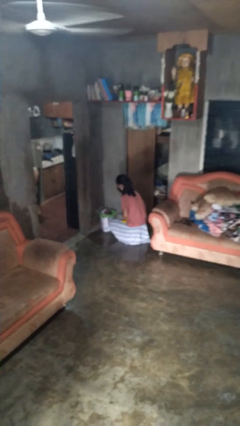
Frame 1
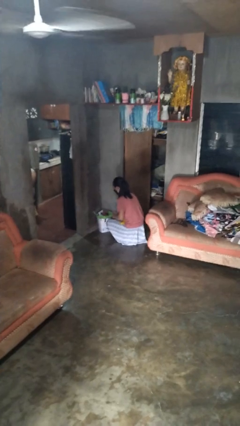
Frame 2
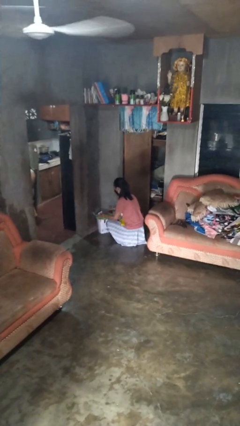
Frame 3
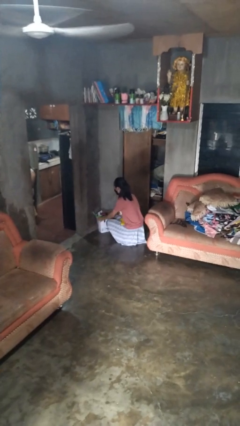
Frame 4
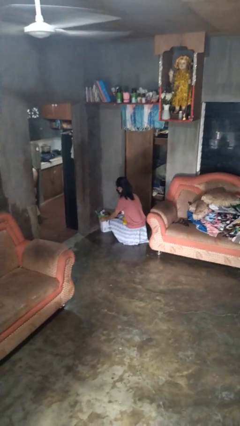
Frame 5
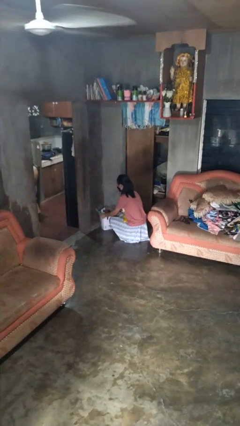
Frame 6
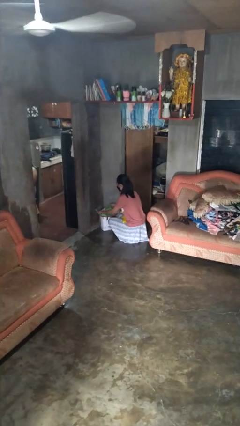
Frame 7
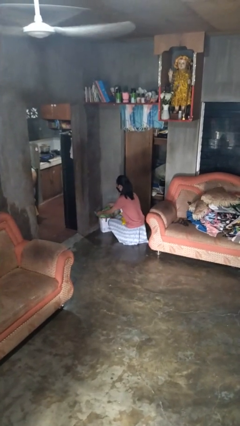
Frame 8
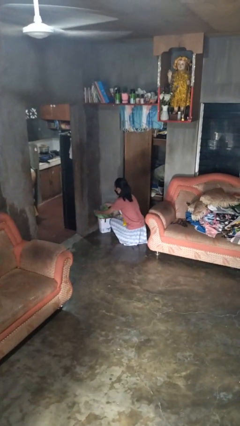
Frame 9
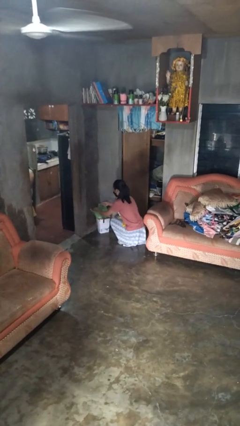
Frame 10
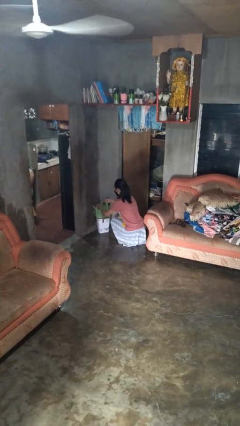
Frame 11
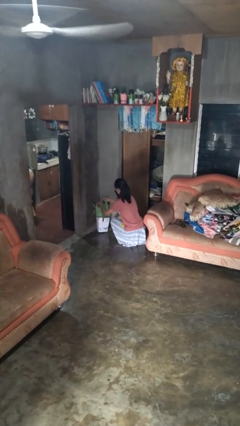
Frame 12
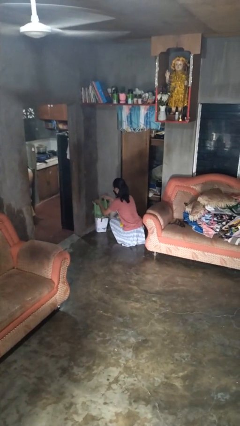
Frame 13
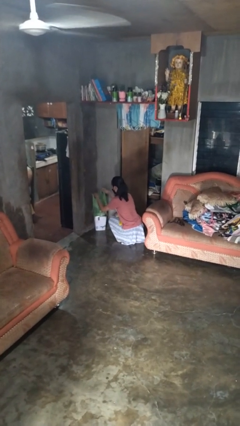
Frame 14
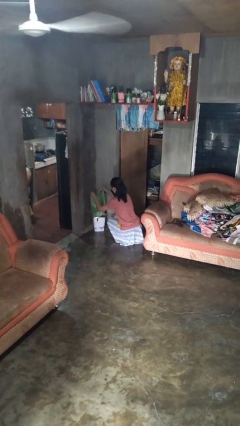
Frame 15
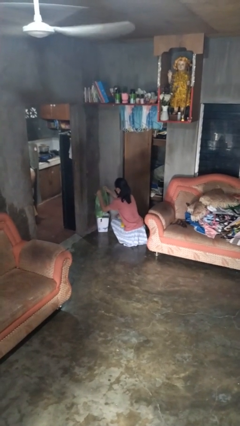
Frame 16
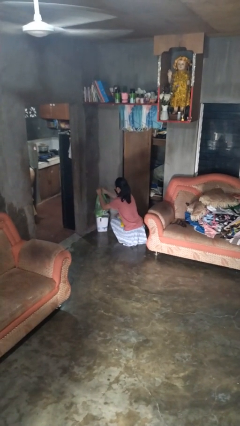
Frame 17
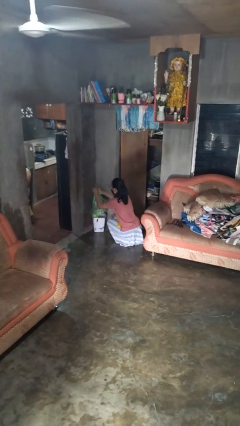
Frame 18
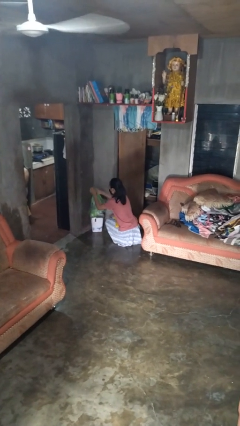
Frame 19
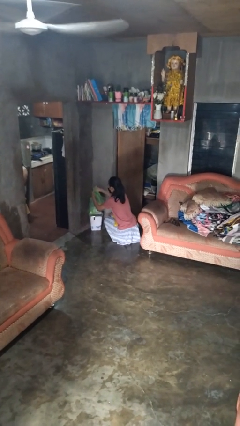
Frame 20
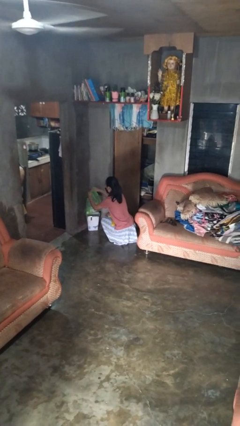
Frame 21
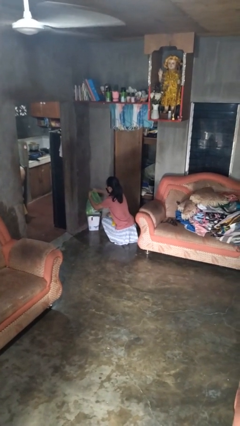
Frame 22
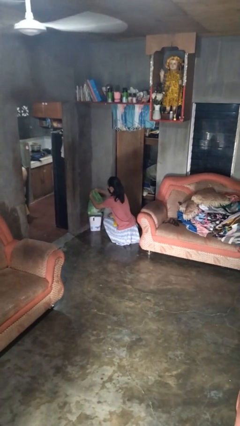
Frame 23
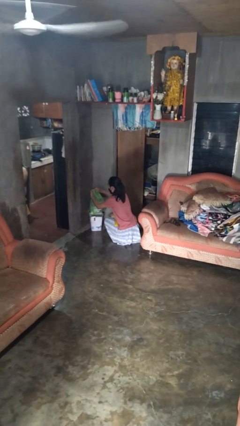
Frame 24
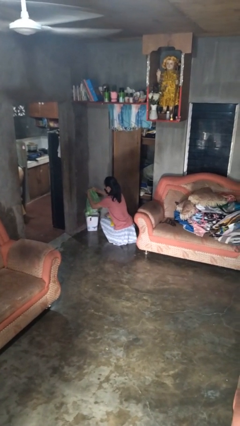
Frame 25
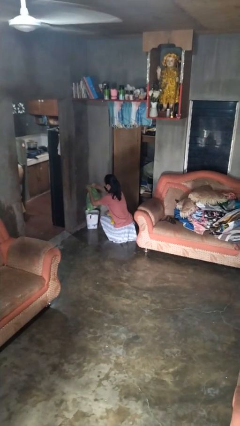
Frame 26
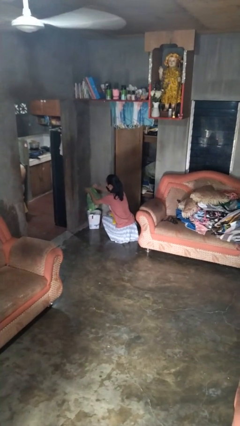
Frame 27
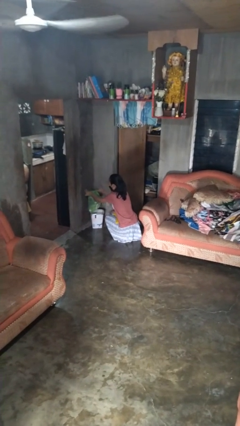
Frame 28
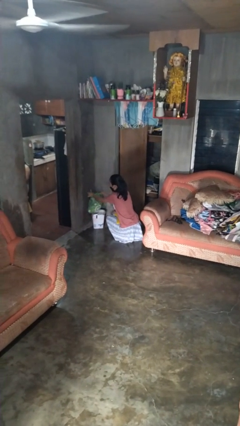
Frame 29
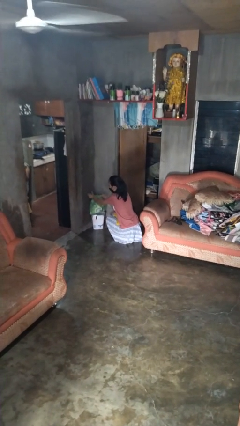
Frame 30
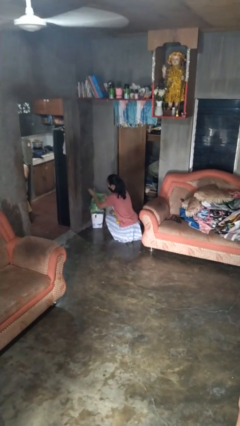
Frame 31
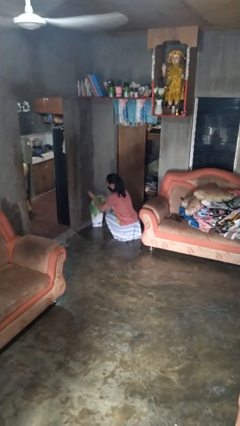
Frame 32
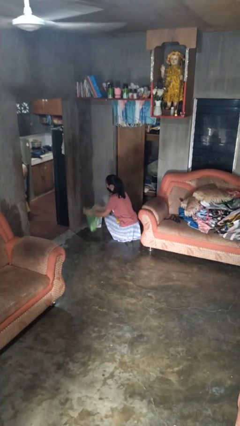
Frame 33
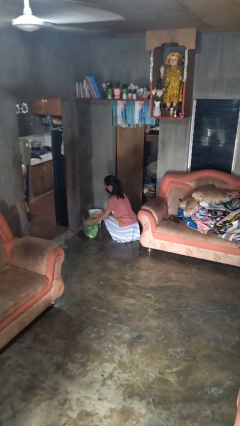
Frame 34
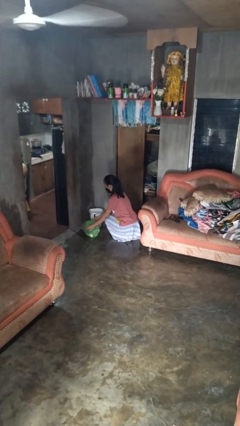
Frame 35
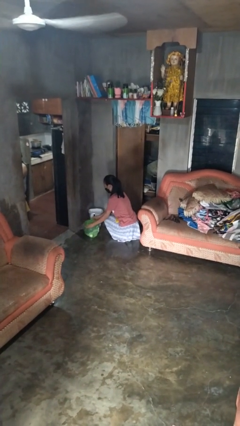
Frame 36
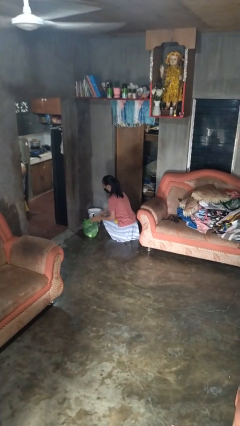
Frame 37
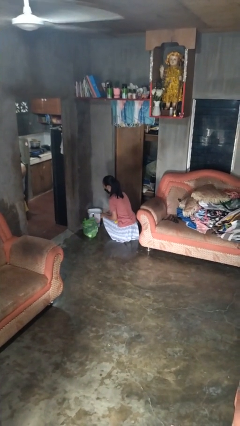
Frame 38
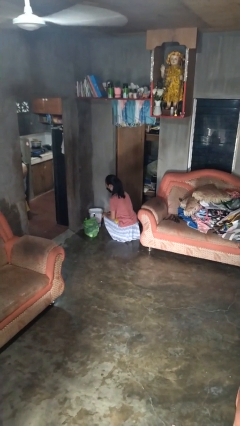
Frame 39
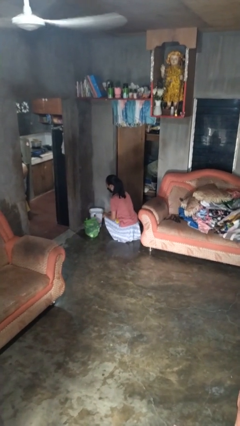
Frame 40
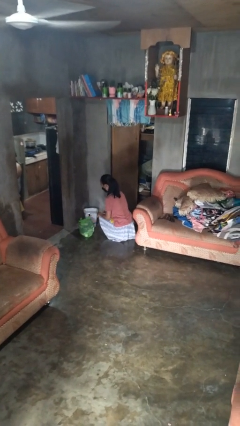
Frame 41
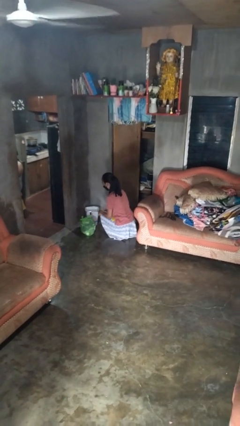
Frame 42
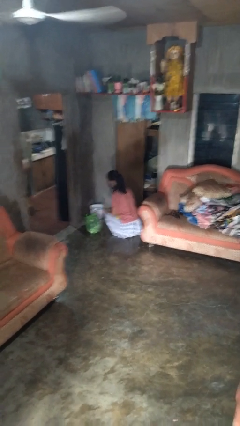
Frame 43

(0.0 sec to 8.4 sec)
person removes trashbag from trashcan

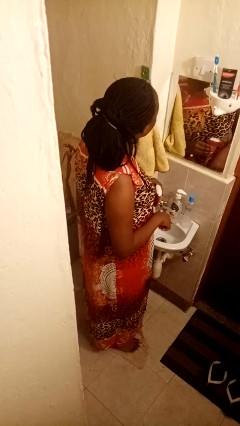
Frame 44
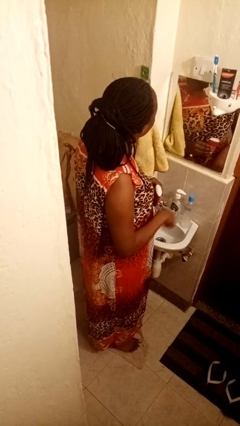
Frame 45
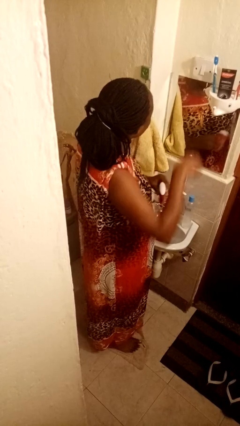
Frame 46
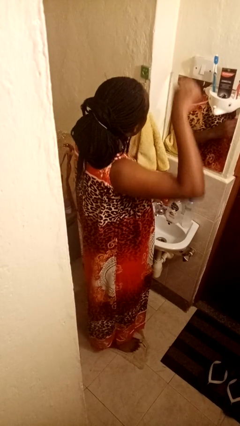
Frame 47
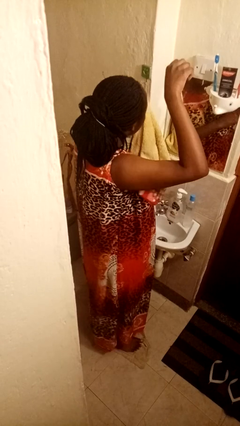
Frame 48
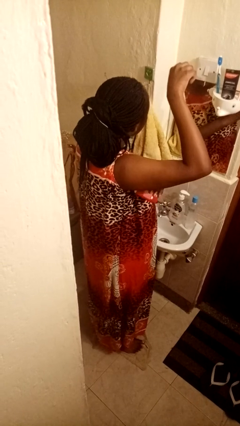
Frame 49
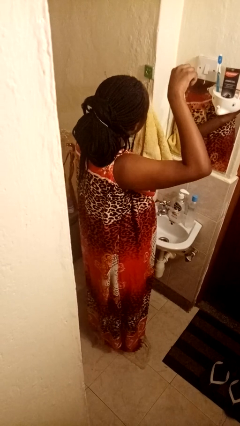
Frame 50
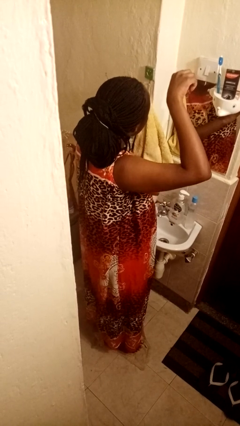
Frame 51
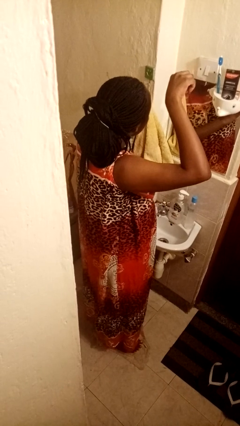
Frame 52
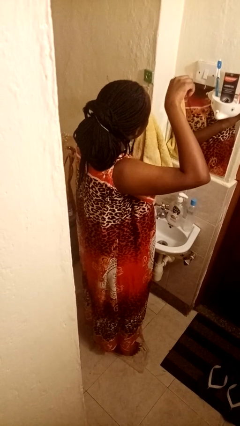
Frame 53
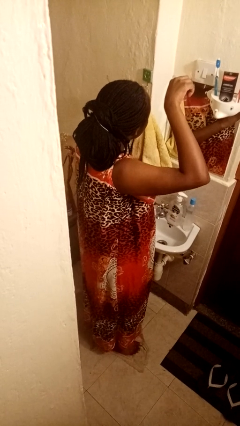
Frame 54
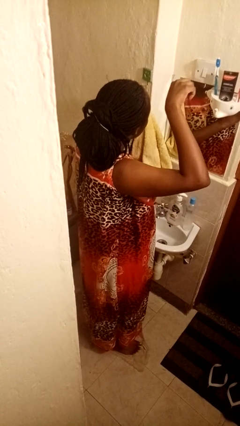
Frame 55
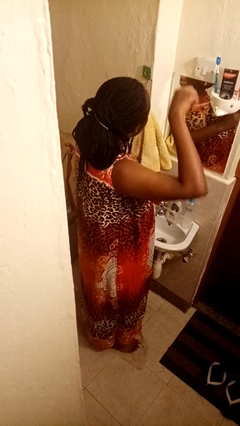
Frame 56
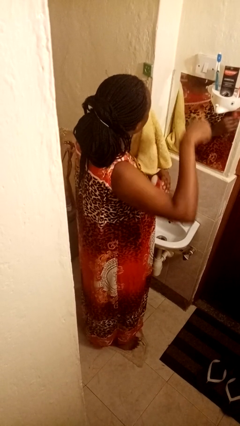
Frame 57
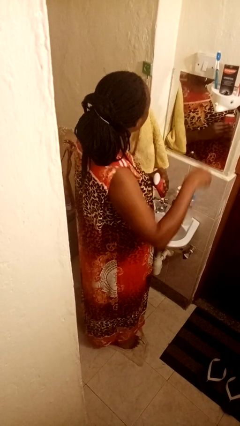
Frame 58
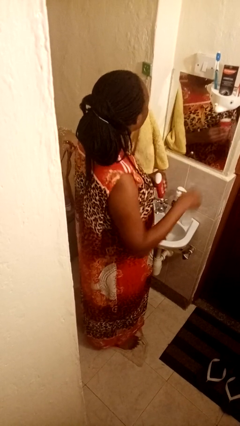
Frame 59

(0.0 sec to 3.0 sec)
person applies deodorant

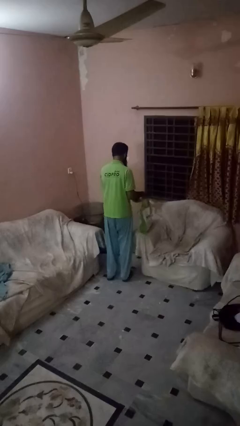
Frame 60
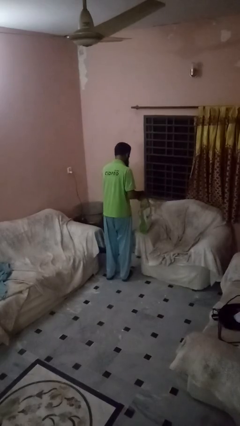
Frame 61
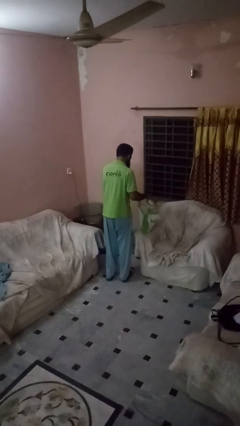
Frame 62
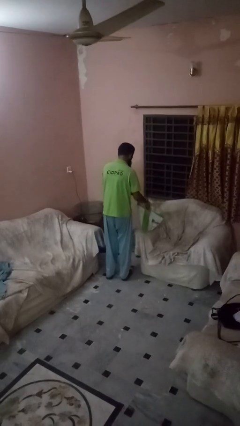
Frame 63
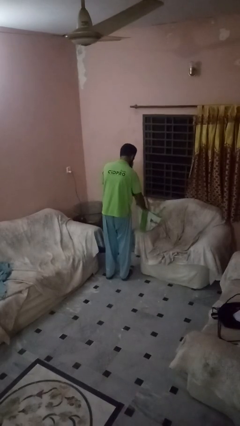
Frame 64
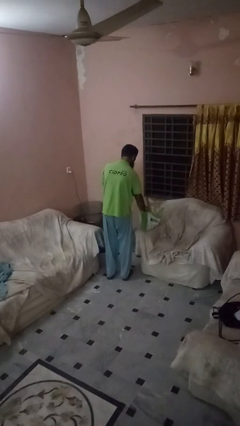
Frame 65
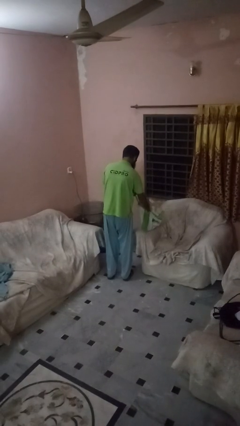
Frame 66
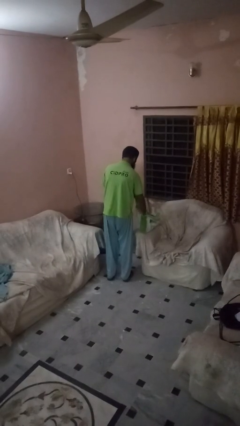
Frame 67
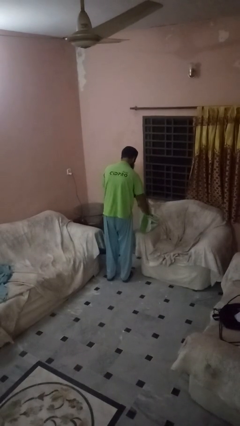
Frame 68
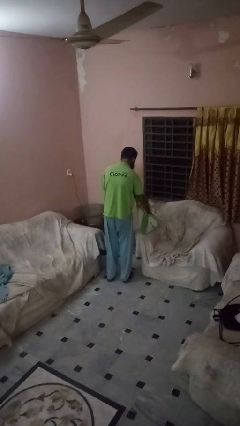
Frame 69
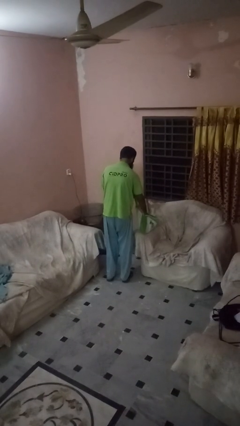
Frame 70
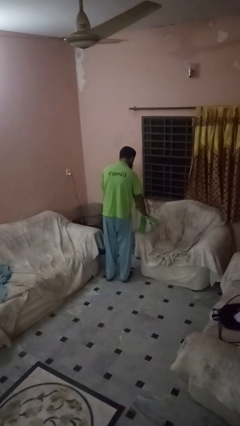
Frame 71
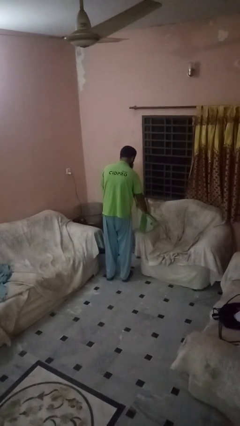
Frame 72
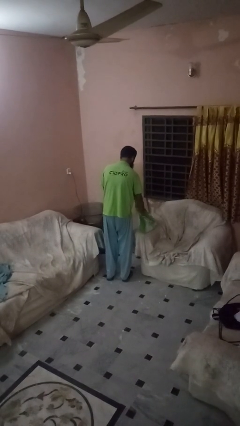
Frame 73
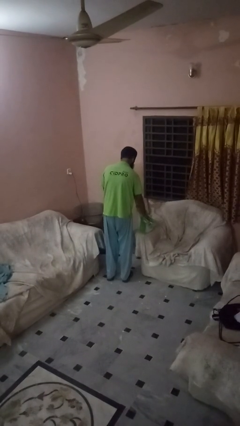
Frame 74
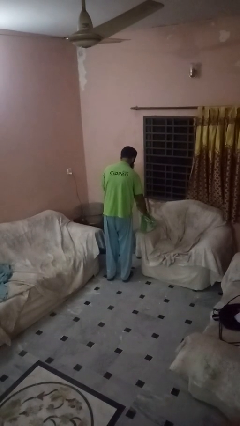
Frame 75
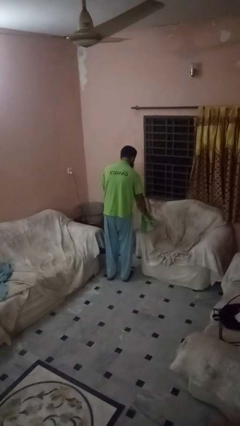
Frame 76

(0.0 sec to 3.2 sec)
person searches in bag

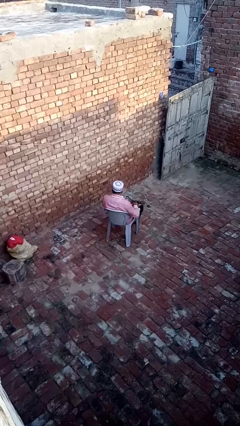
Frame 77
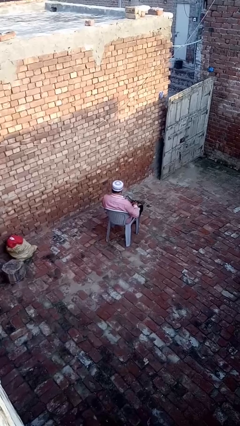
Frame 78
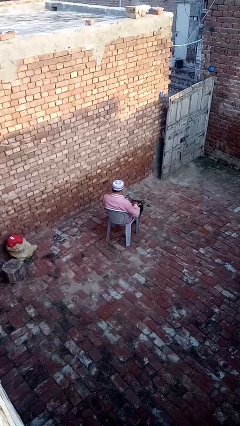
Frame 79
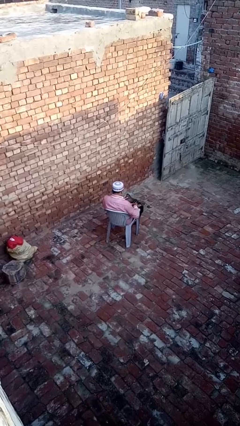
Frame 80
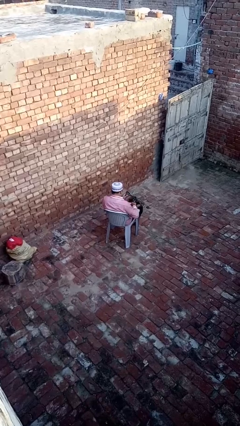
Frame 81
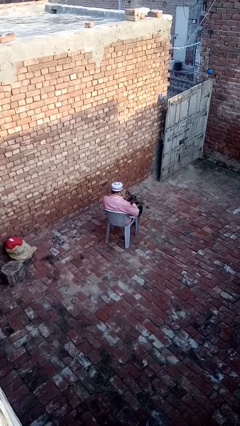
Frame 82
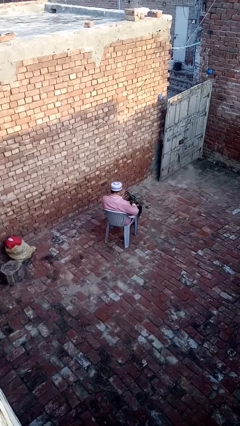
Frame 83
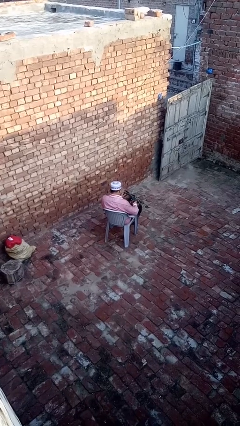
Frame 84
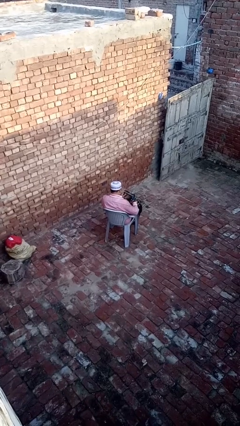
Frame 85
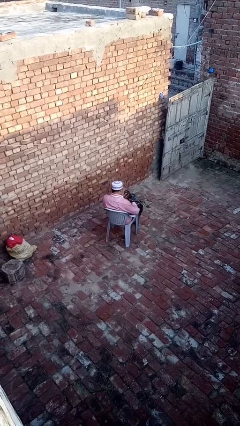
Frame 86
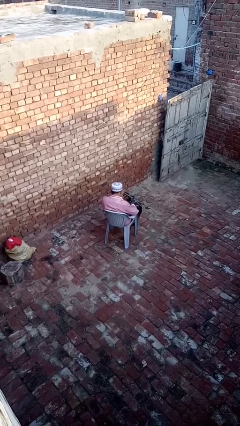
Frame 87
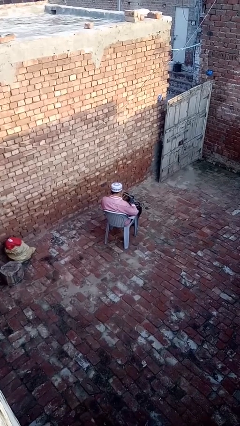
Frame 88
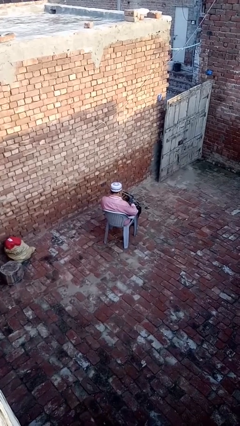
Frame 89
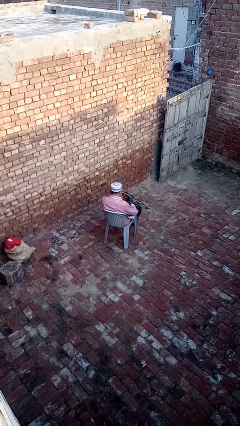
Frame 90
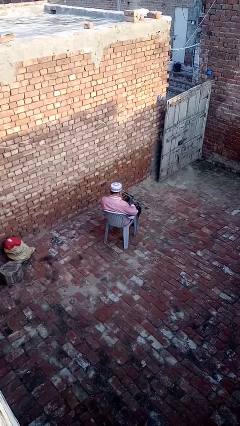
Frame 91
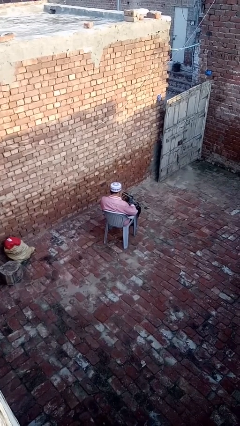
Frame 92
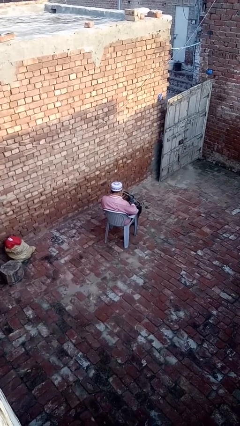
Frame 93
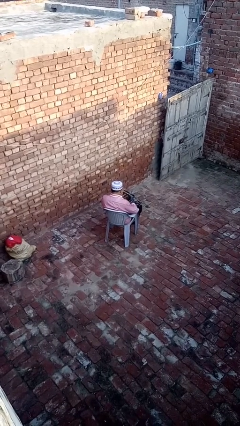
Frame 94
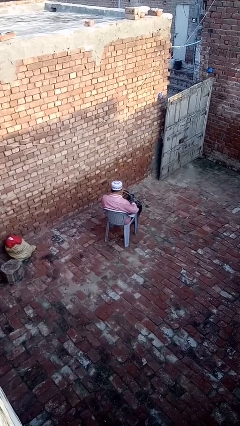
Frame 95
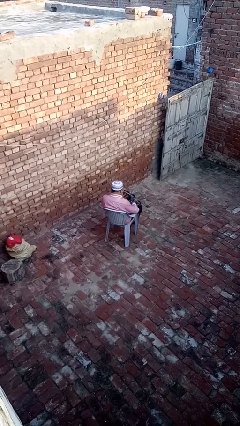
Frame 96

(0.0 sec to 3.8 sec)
person searches in purse
